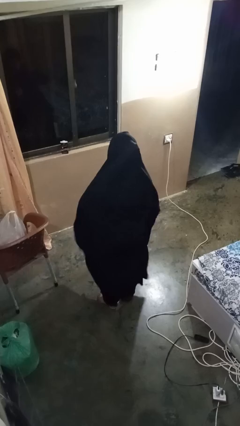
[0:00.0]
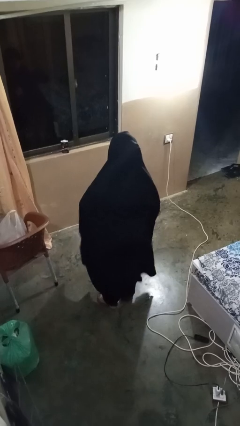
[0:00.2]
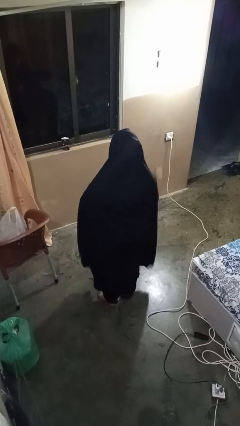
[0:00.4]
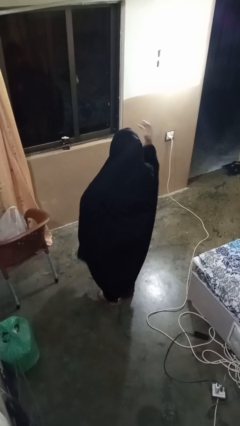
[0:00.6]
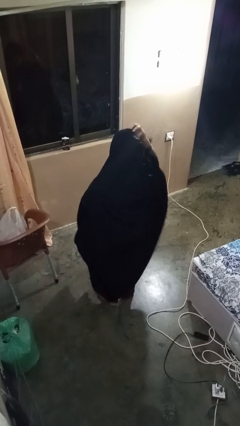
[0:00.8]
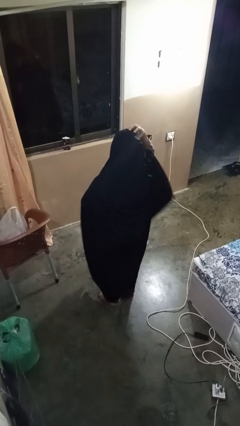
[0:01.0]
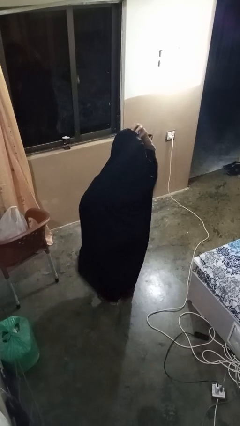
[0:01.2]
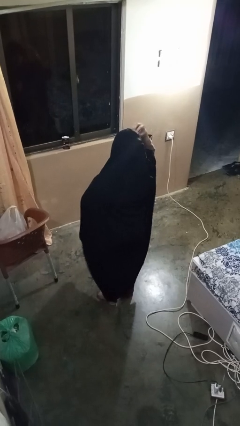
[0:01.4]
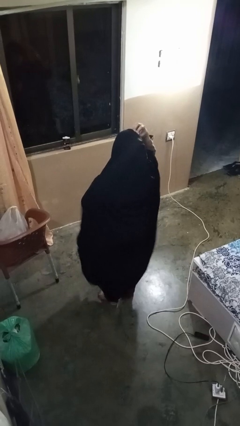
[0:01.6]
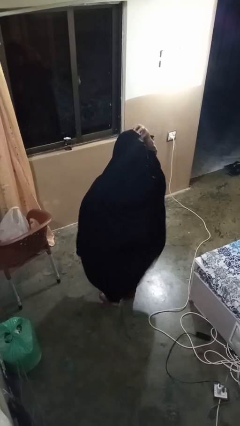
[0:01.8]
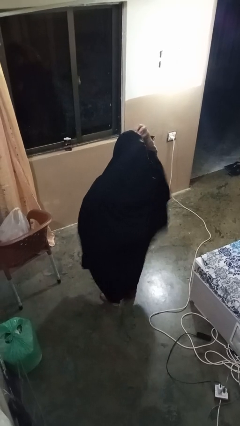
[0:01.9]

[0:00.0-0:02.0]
person scratches face

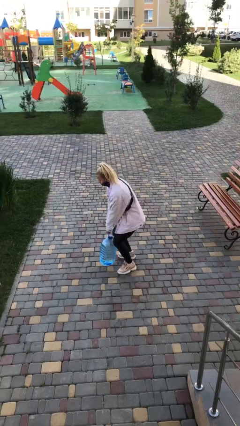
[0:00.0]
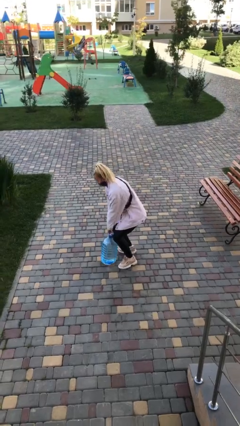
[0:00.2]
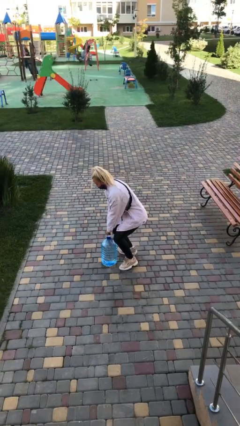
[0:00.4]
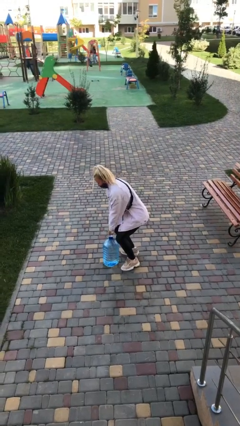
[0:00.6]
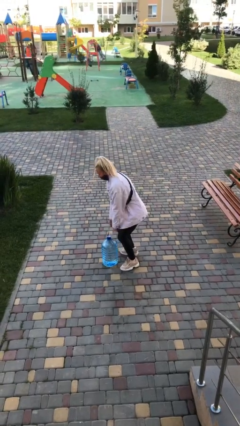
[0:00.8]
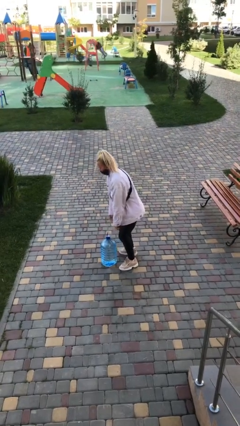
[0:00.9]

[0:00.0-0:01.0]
person puts down object on floor

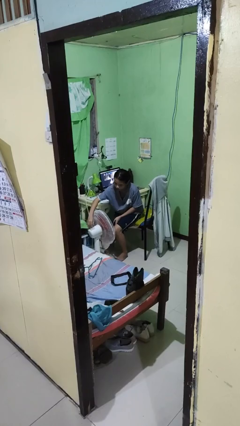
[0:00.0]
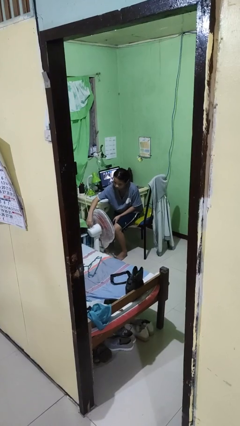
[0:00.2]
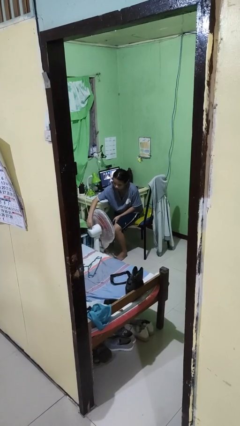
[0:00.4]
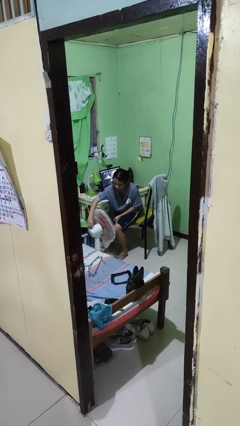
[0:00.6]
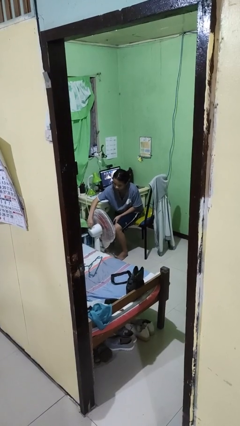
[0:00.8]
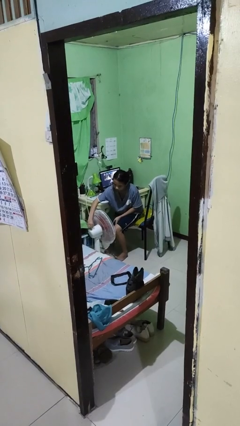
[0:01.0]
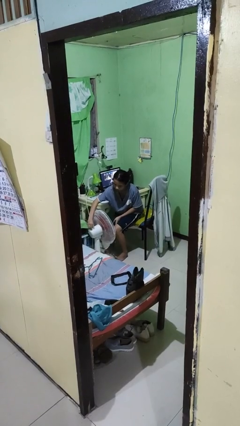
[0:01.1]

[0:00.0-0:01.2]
person turns on fan

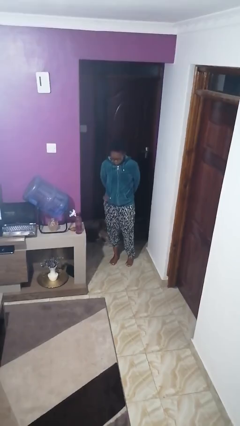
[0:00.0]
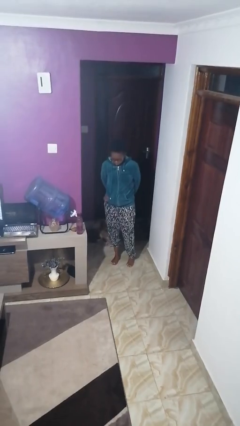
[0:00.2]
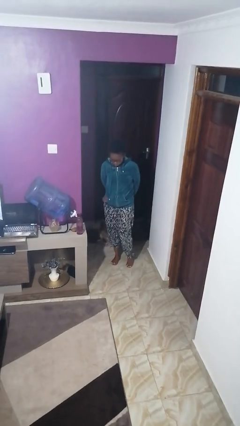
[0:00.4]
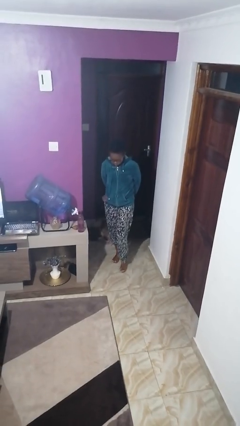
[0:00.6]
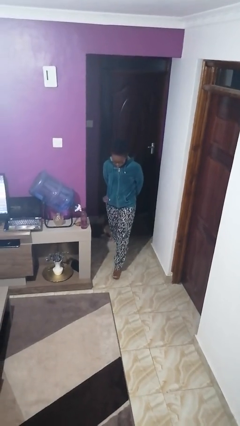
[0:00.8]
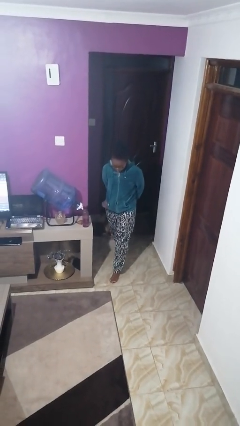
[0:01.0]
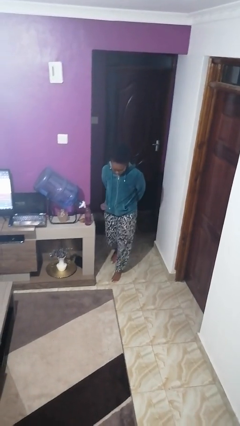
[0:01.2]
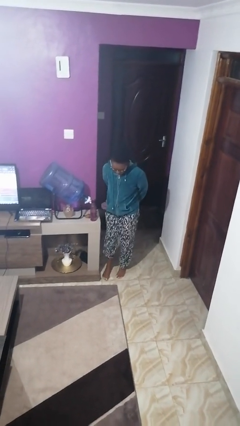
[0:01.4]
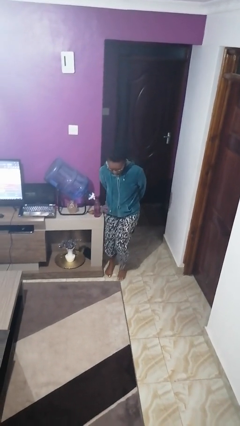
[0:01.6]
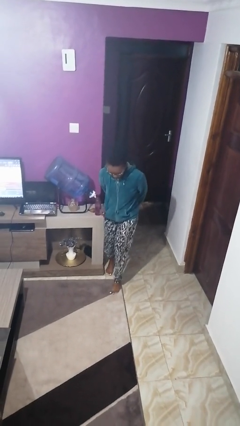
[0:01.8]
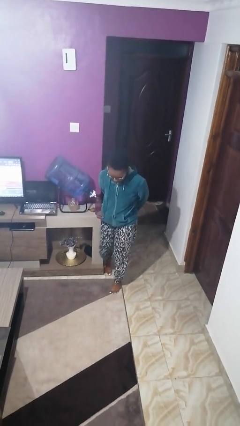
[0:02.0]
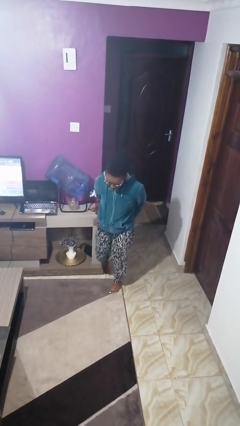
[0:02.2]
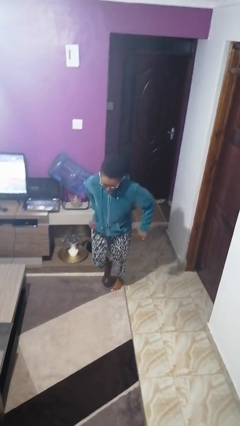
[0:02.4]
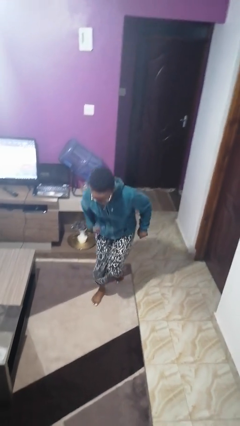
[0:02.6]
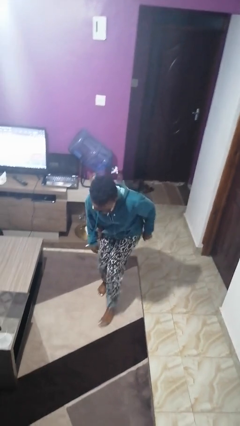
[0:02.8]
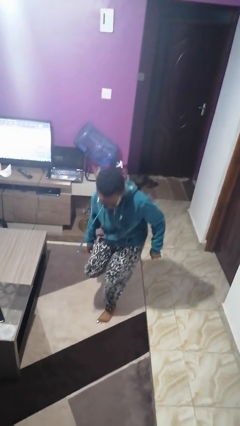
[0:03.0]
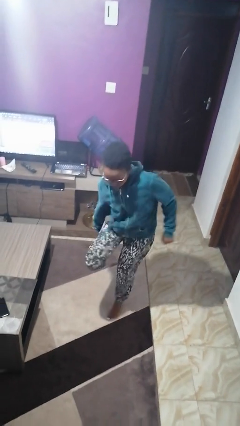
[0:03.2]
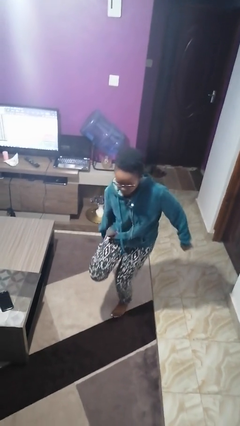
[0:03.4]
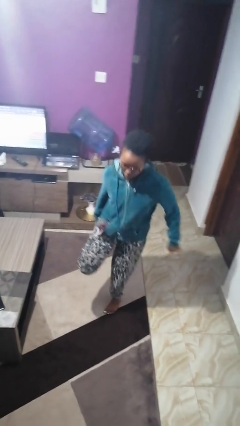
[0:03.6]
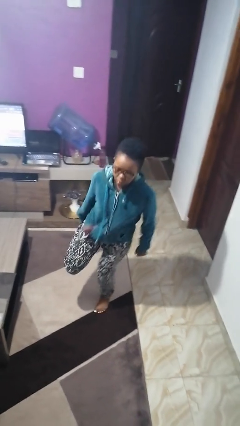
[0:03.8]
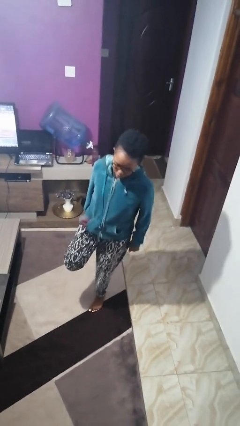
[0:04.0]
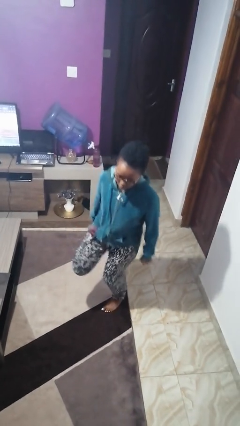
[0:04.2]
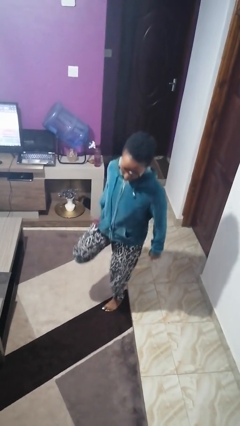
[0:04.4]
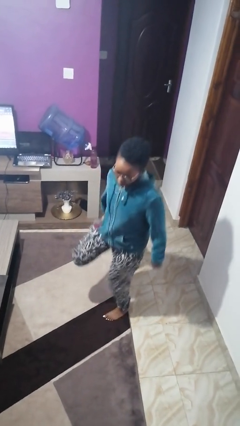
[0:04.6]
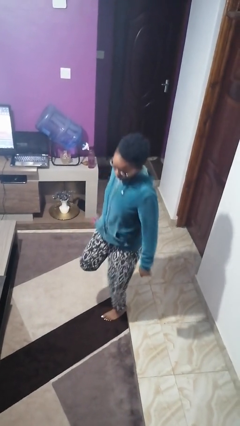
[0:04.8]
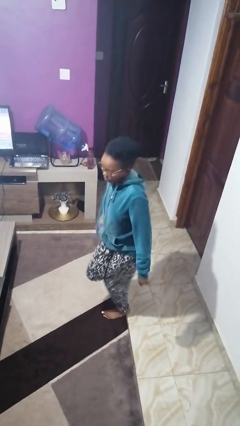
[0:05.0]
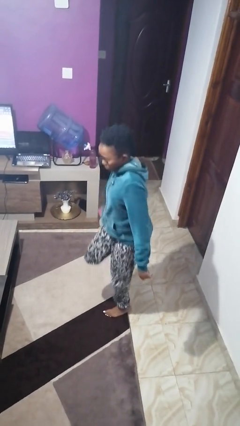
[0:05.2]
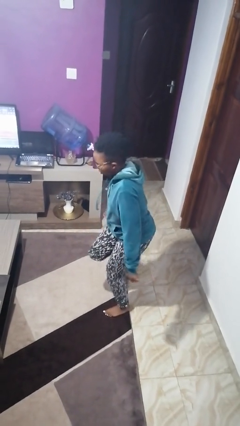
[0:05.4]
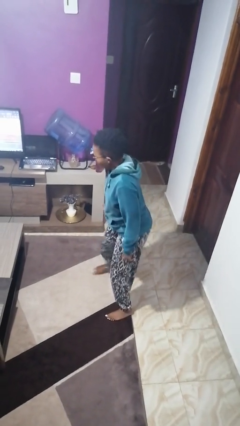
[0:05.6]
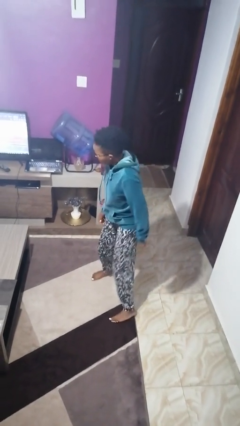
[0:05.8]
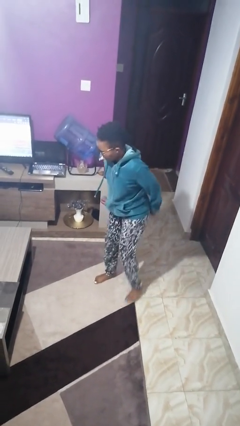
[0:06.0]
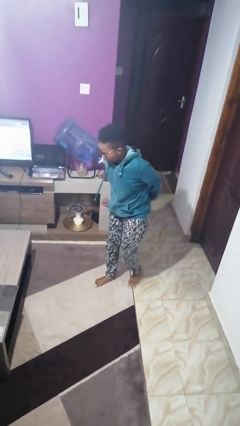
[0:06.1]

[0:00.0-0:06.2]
person stubs toe

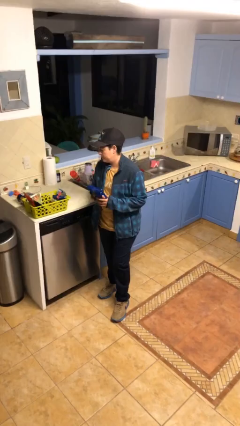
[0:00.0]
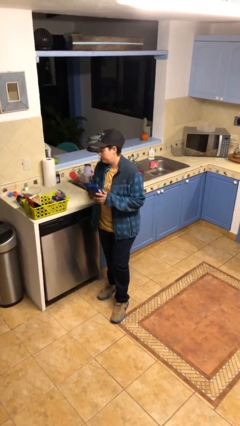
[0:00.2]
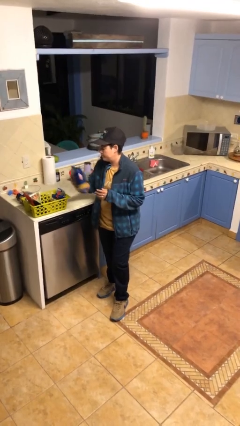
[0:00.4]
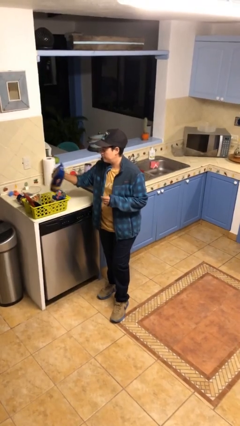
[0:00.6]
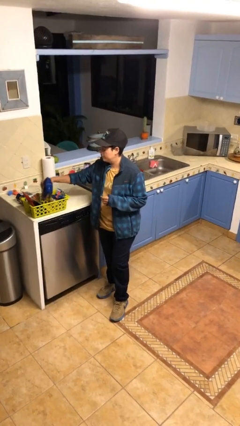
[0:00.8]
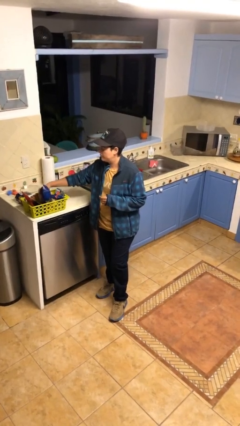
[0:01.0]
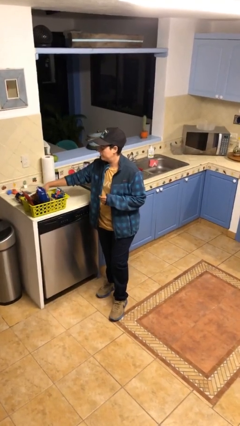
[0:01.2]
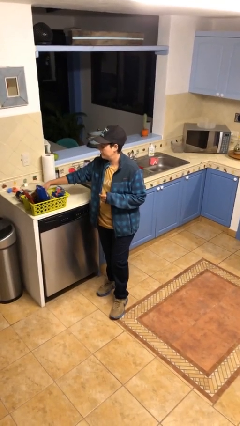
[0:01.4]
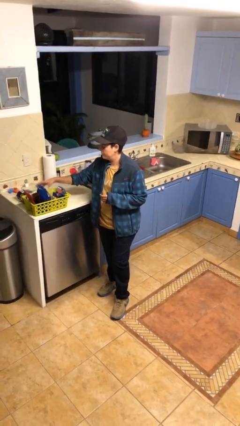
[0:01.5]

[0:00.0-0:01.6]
person puts object into basket

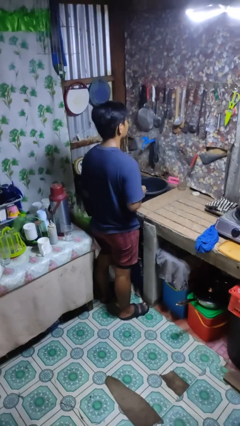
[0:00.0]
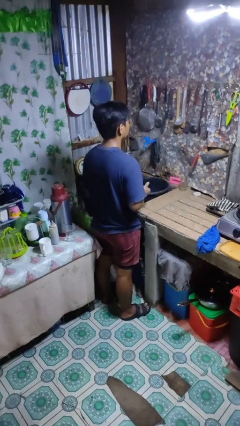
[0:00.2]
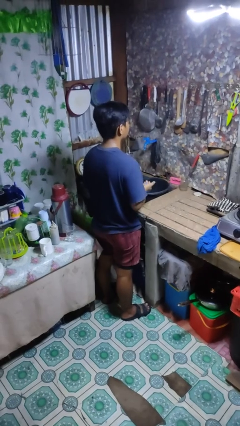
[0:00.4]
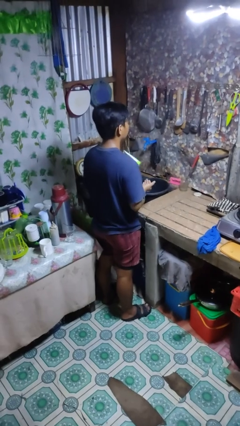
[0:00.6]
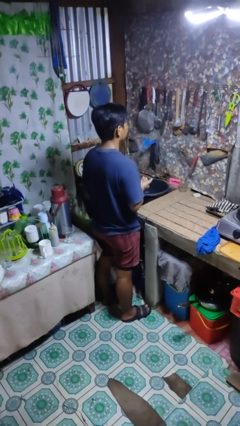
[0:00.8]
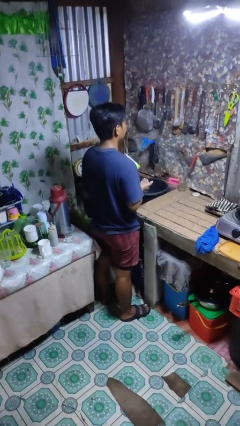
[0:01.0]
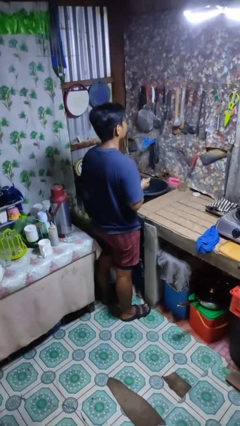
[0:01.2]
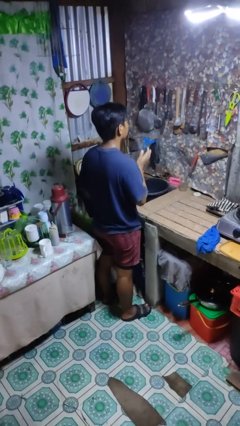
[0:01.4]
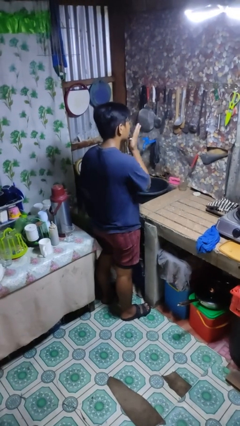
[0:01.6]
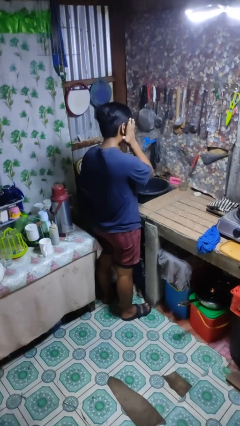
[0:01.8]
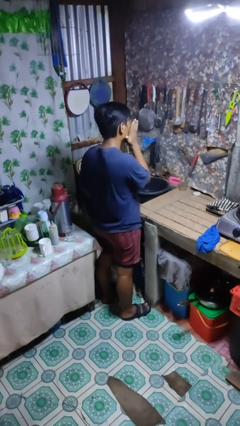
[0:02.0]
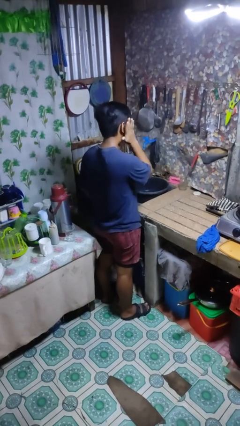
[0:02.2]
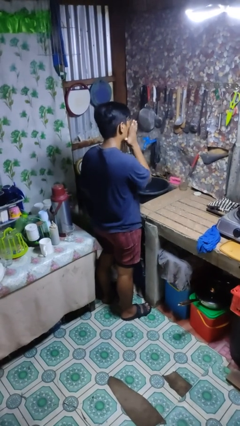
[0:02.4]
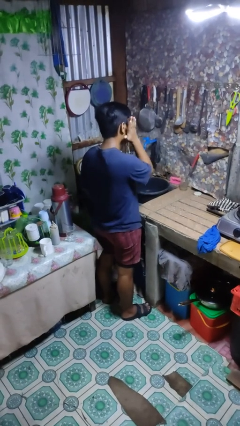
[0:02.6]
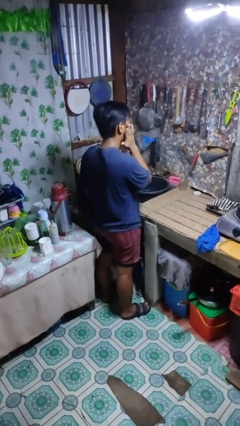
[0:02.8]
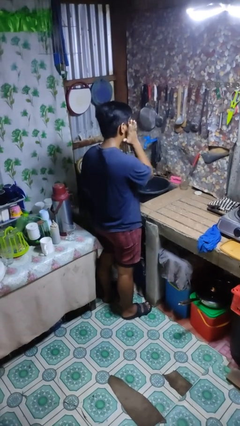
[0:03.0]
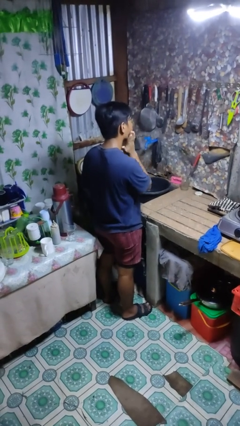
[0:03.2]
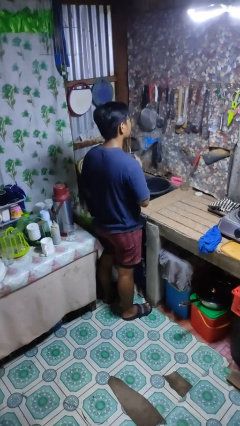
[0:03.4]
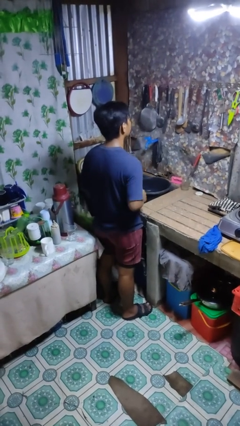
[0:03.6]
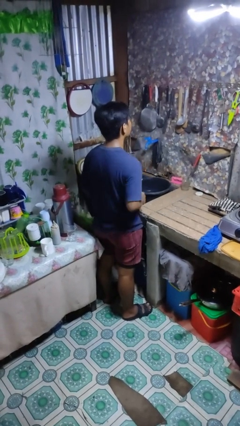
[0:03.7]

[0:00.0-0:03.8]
person applies facial moisturizer

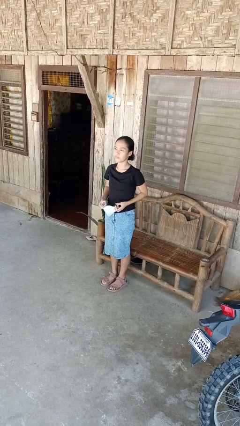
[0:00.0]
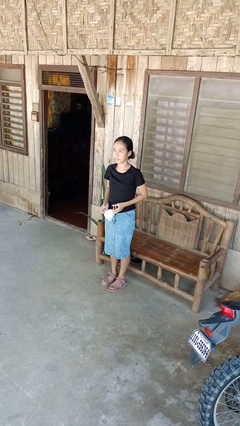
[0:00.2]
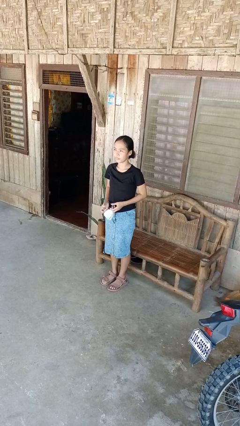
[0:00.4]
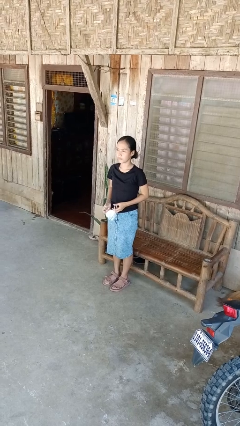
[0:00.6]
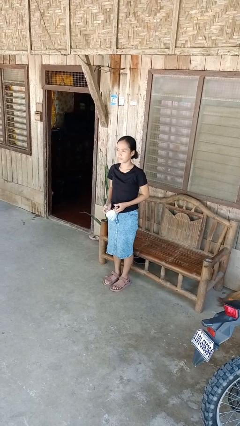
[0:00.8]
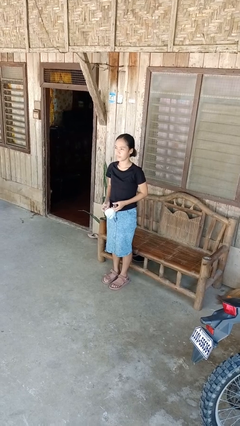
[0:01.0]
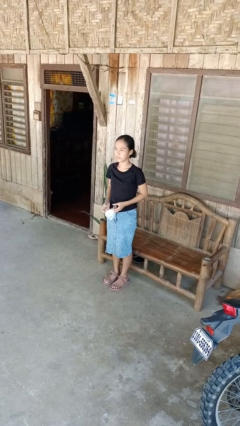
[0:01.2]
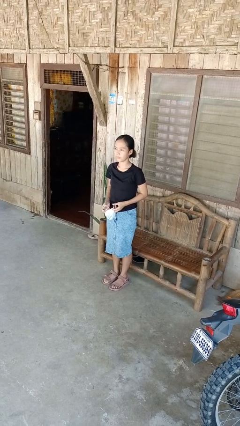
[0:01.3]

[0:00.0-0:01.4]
person takes off facemask
